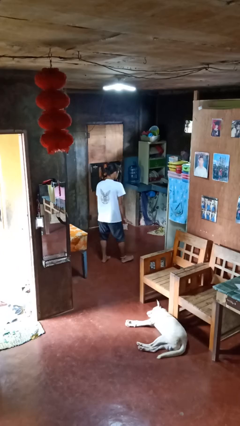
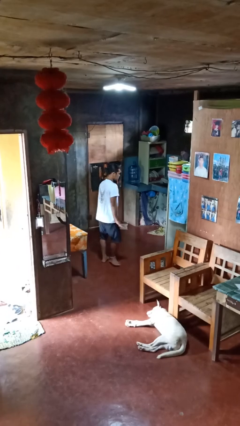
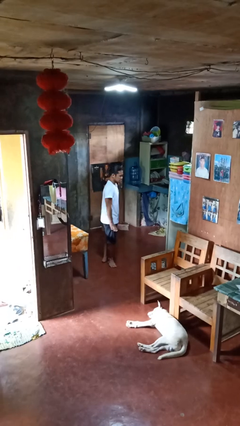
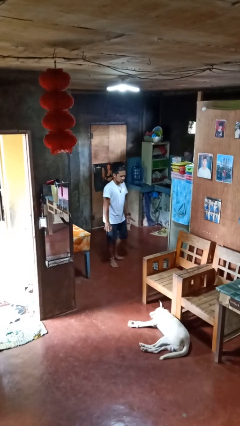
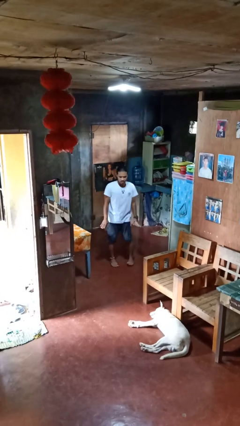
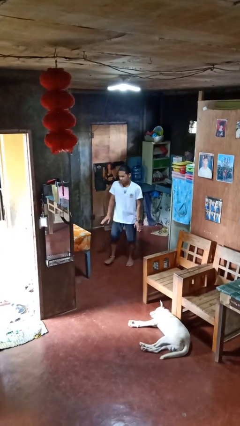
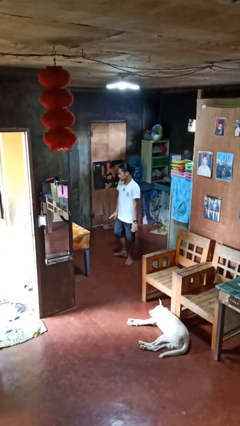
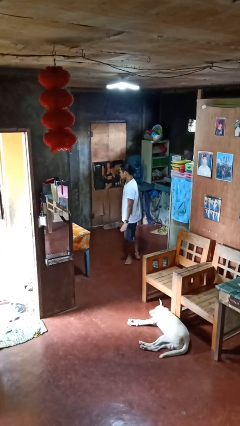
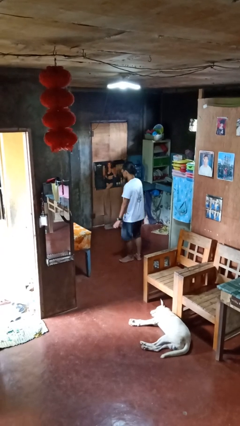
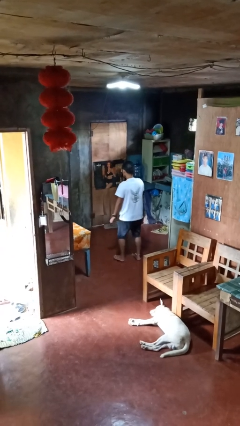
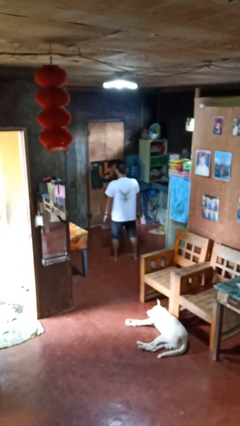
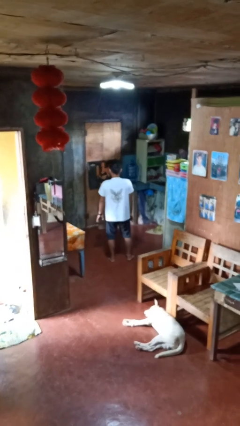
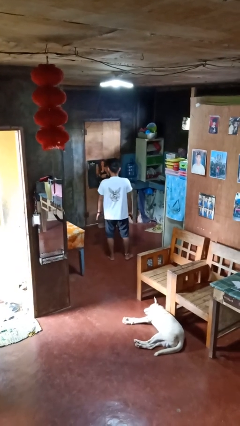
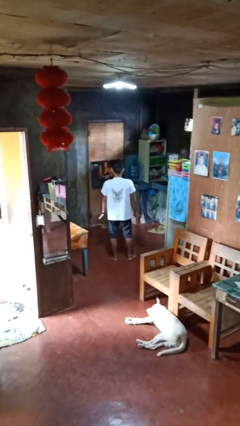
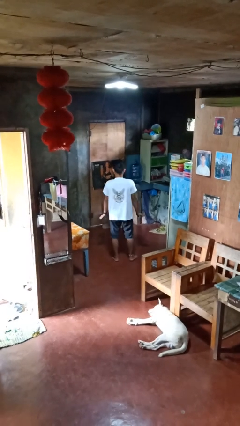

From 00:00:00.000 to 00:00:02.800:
person twirls

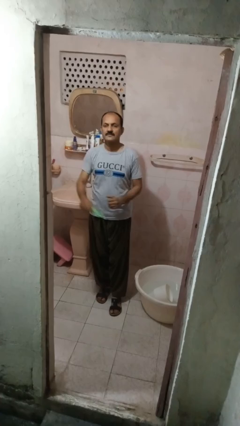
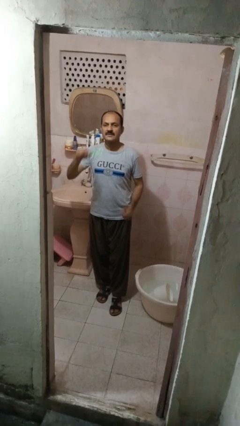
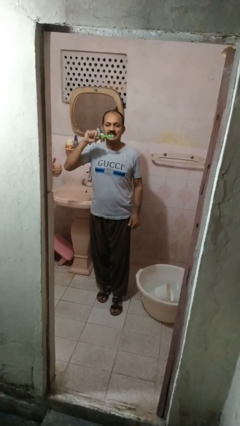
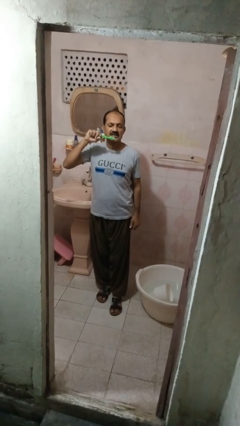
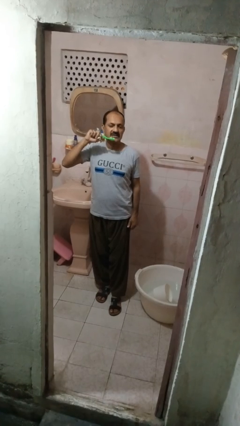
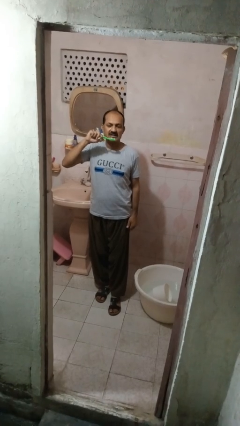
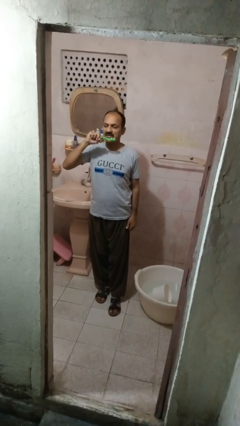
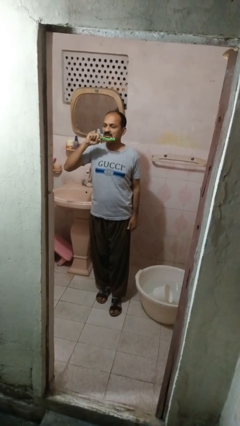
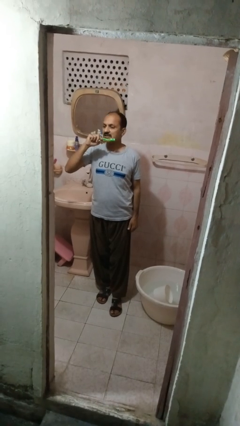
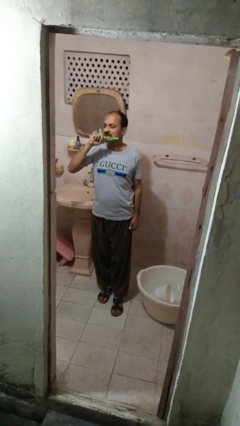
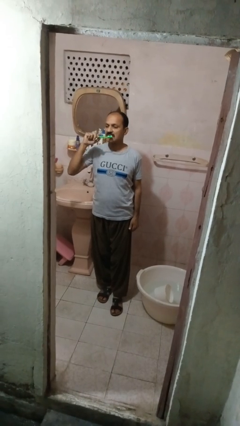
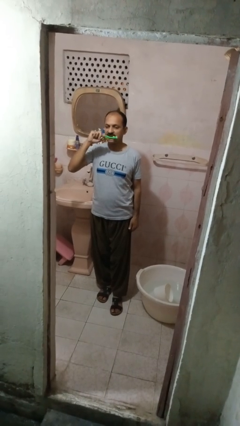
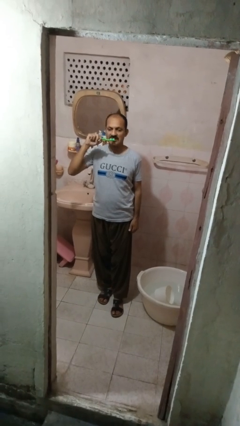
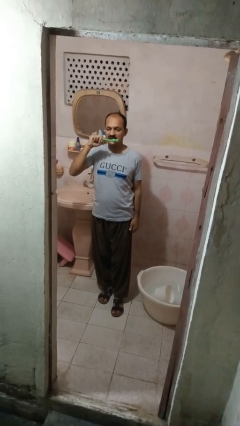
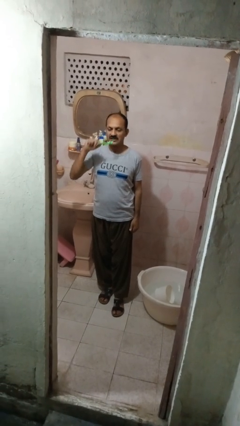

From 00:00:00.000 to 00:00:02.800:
person brushes teeth

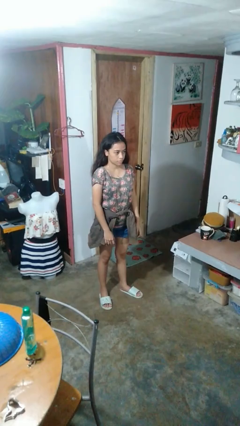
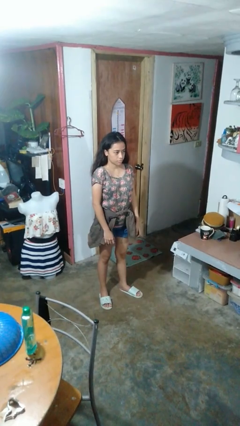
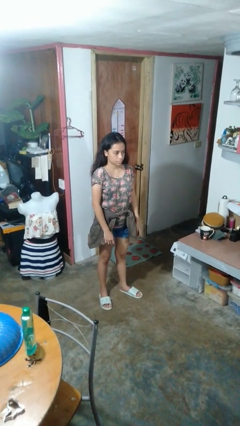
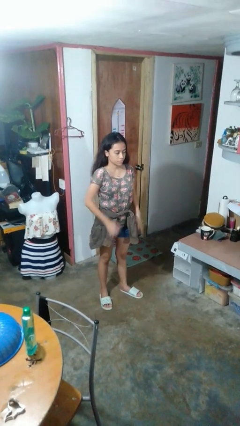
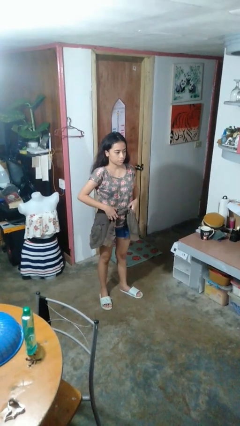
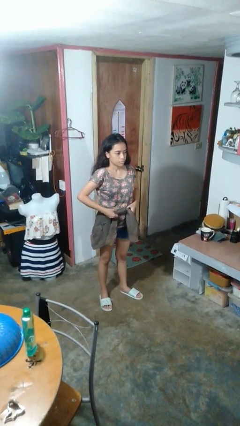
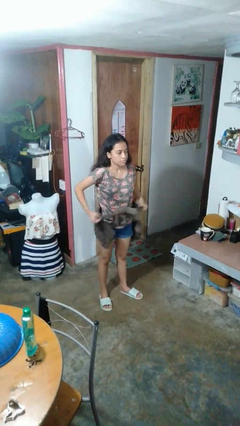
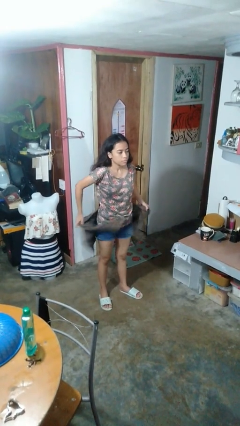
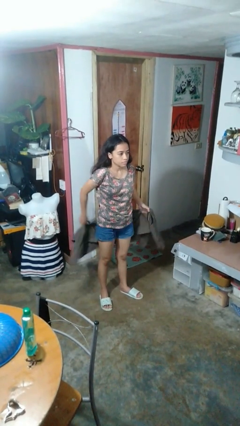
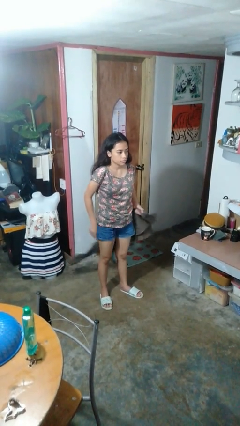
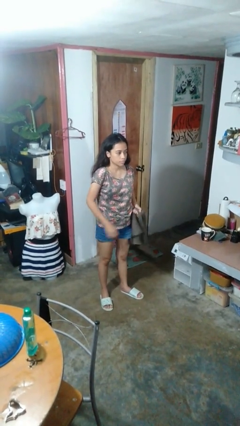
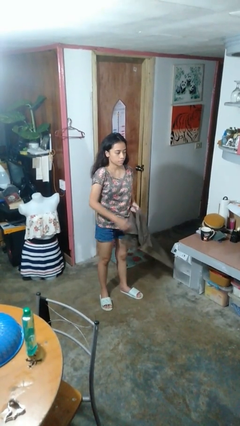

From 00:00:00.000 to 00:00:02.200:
person unties jacket around waist

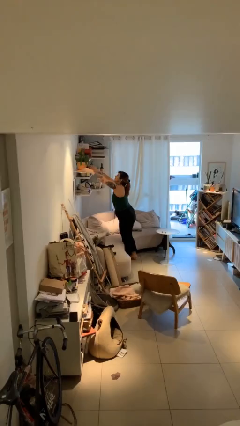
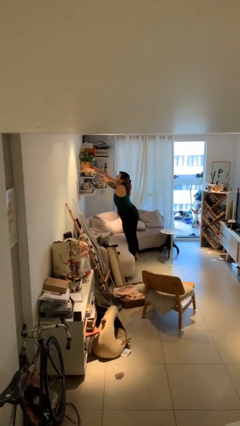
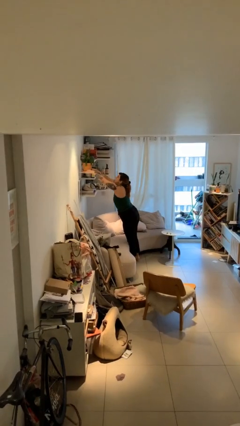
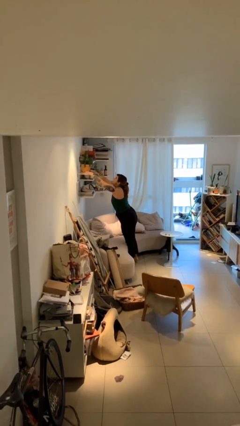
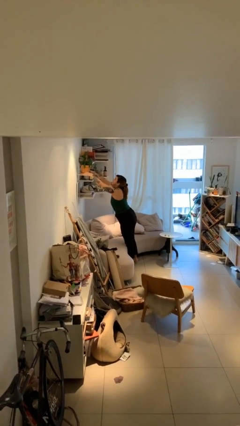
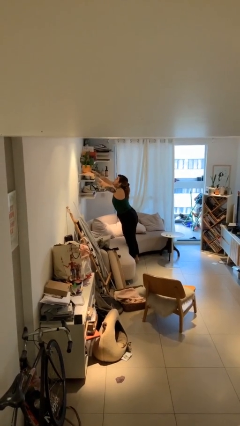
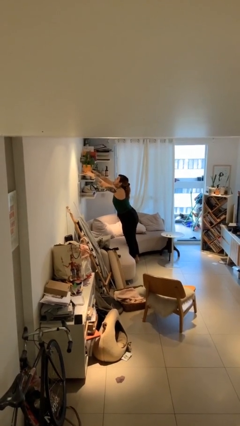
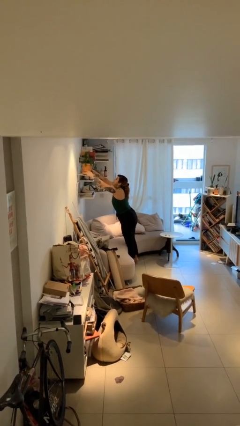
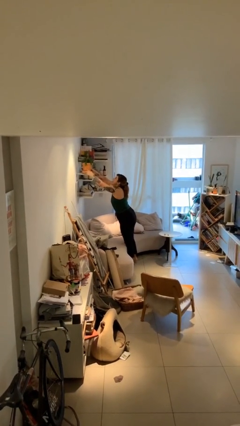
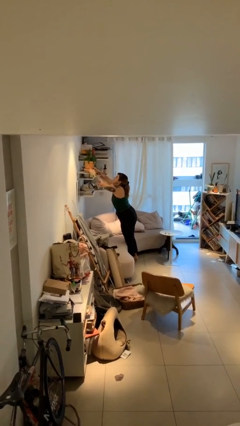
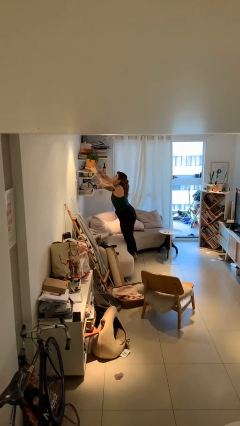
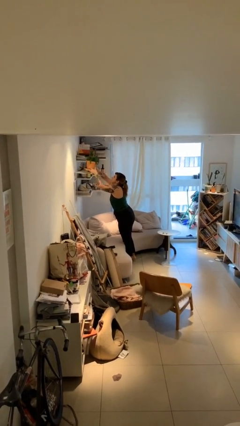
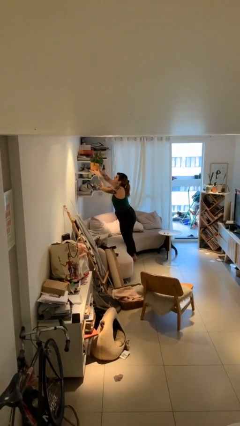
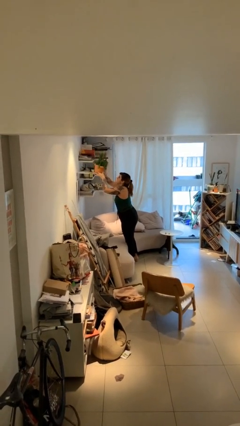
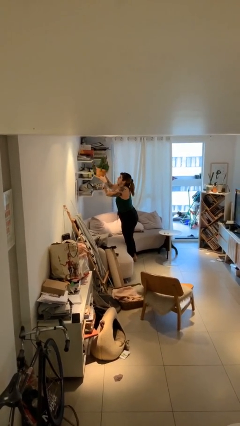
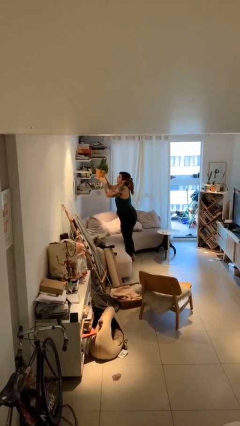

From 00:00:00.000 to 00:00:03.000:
person picks up object from shelf

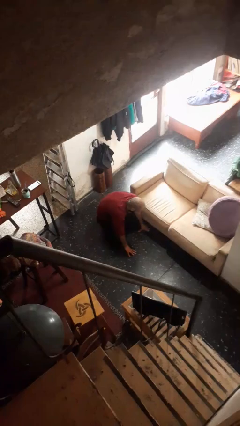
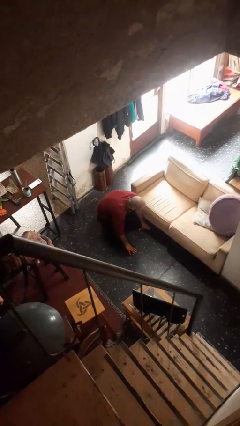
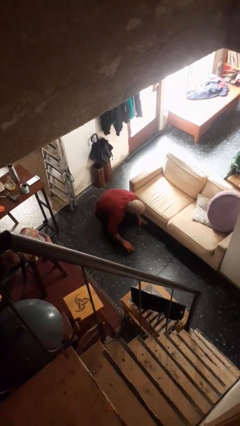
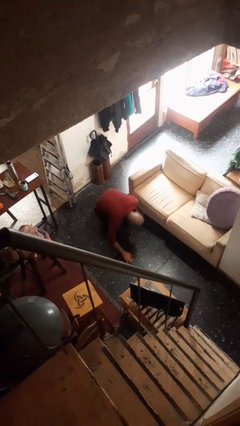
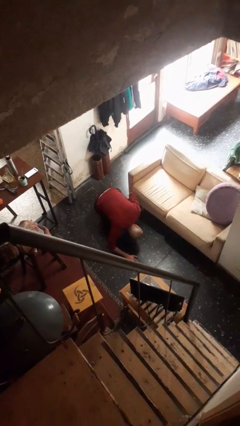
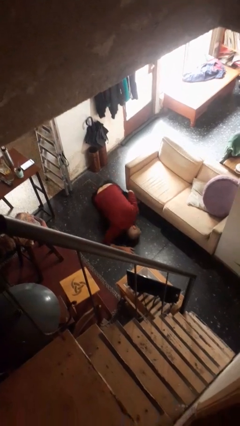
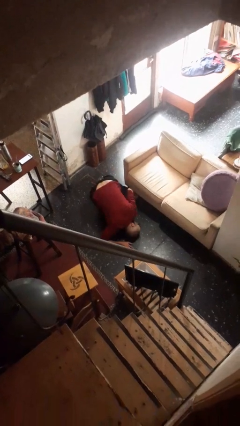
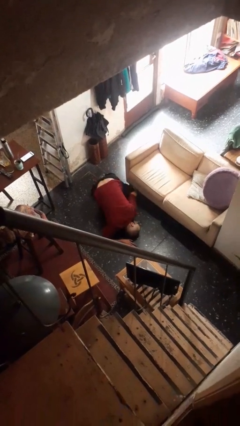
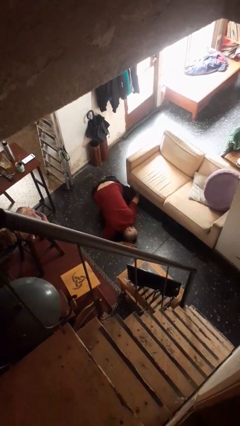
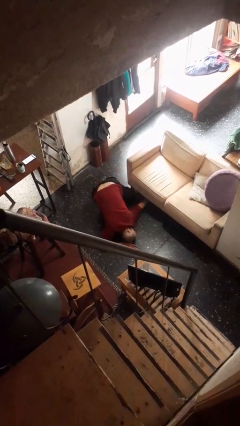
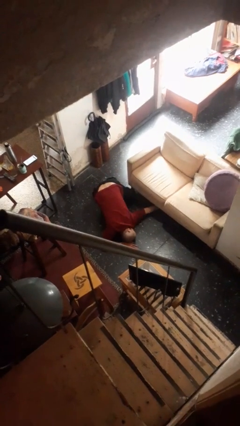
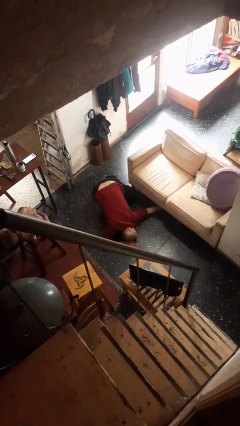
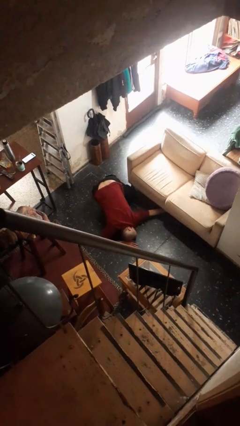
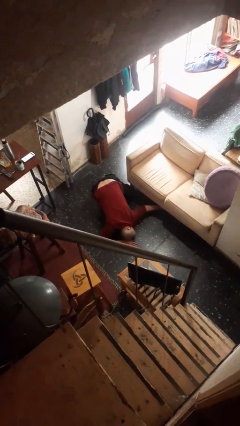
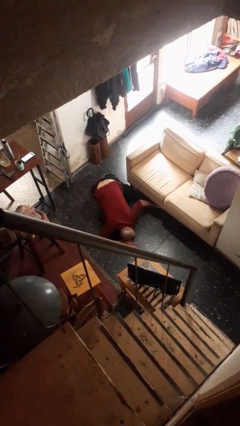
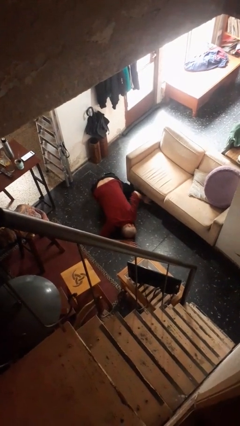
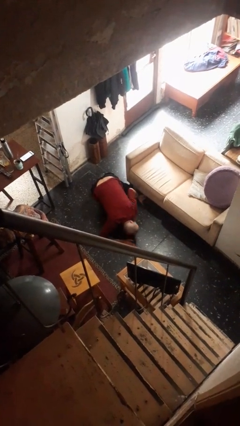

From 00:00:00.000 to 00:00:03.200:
person searches under couch

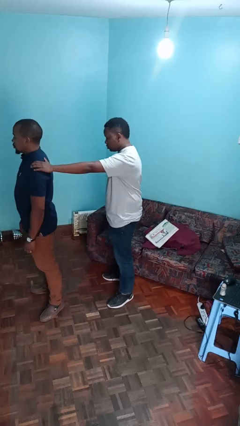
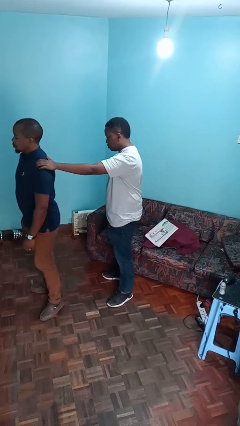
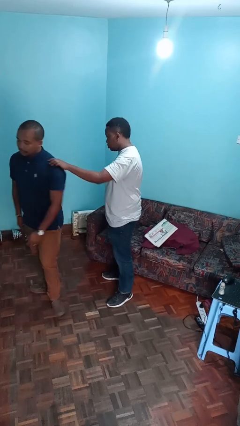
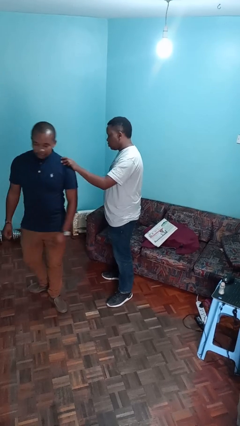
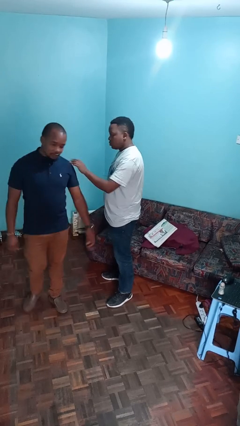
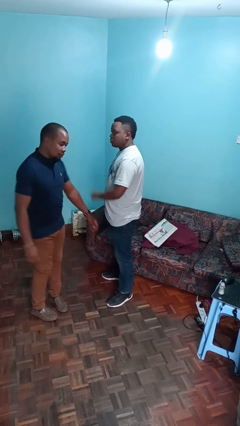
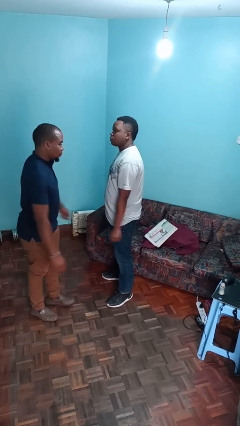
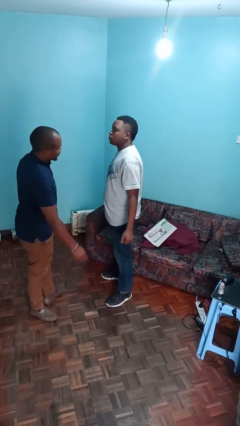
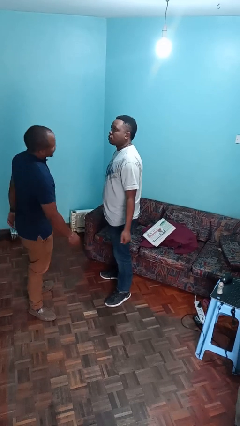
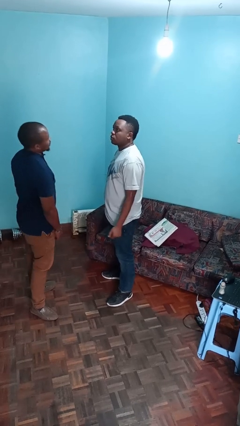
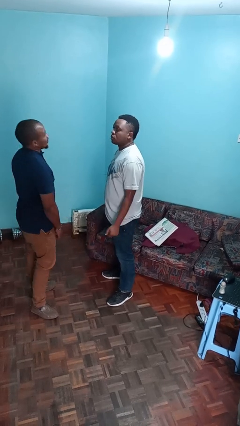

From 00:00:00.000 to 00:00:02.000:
person spins person around

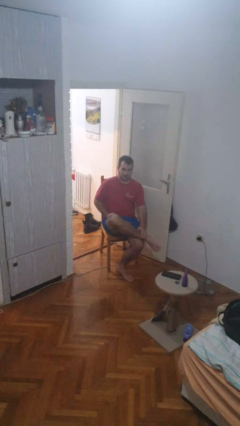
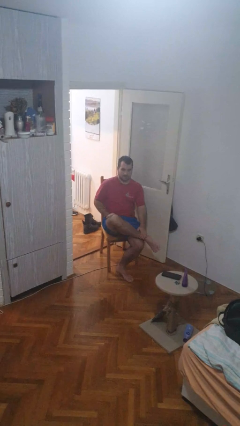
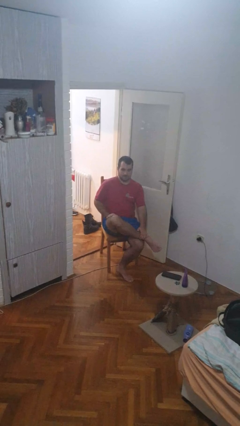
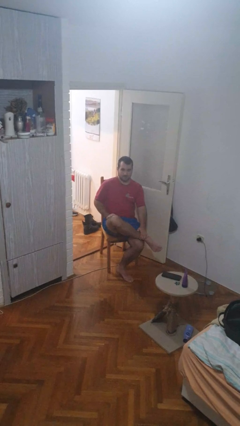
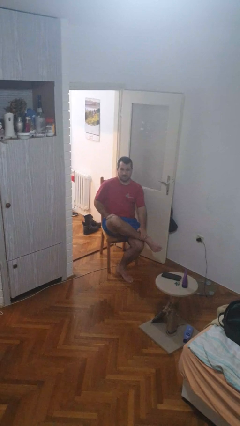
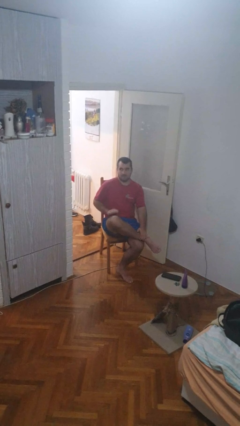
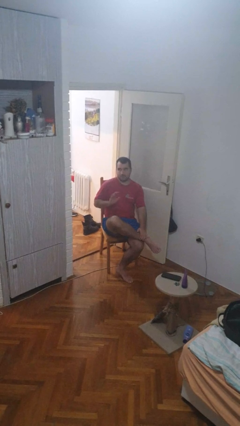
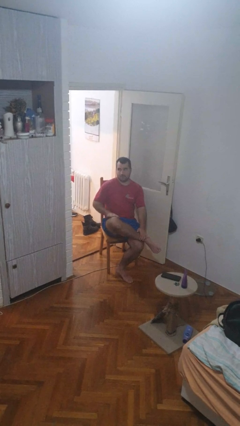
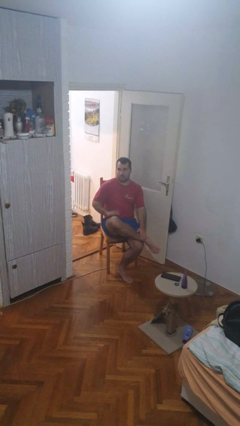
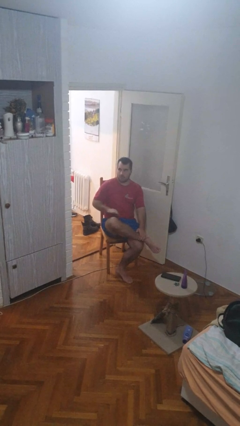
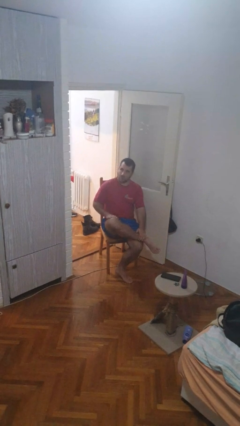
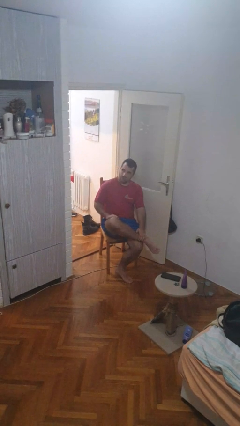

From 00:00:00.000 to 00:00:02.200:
person slaps hands on thighs
